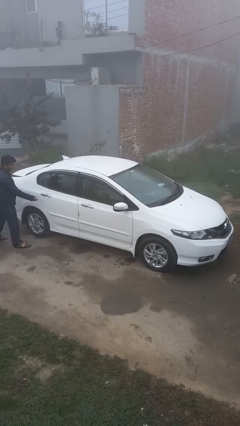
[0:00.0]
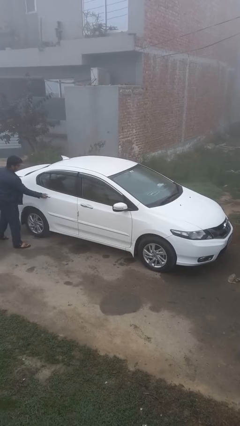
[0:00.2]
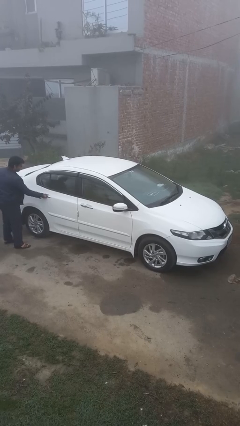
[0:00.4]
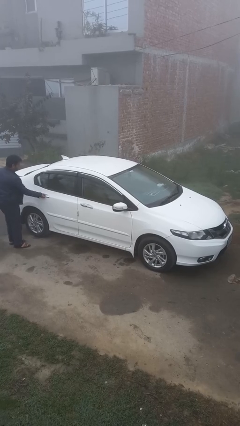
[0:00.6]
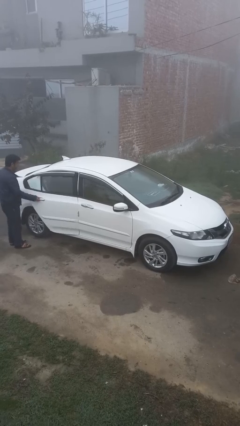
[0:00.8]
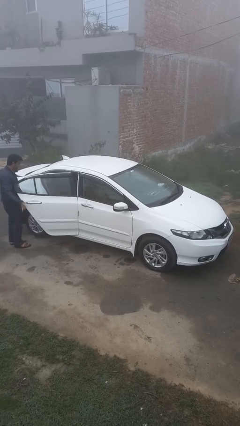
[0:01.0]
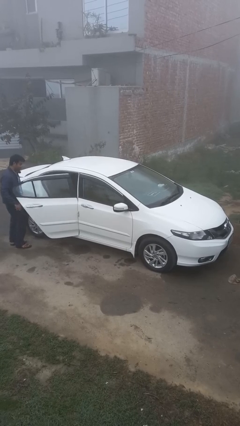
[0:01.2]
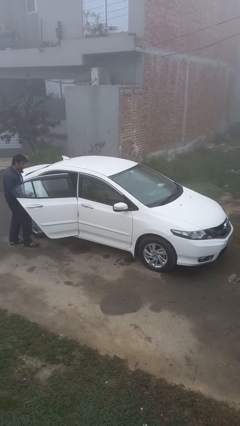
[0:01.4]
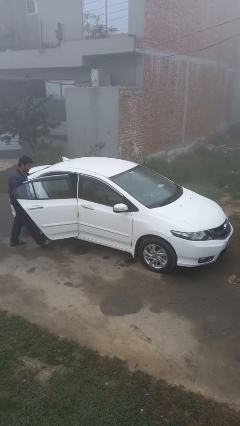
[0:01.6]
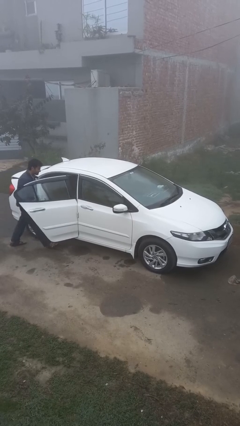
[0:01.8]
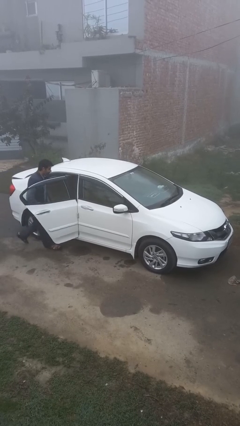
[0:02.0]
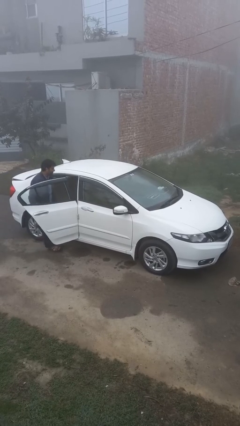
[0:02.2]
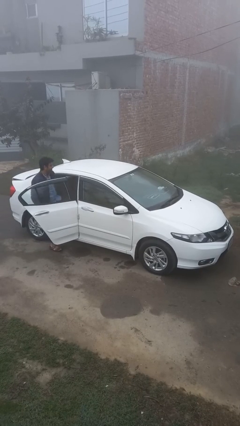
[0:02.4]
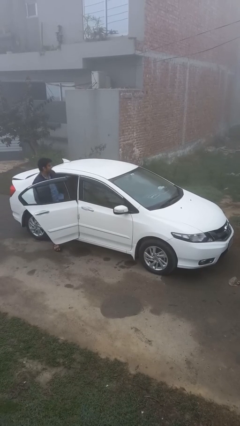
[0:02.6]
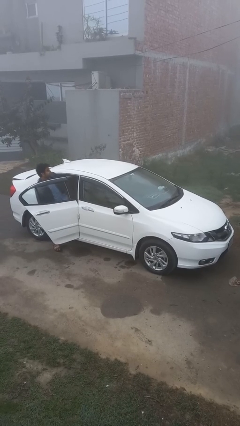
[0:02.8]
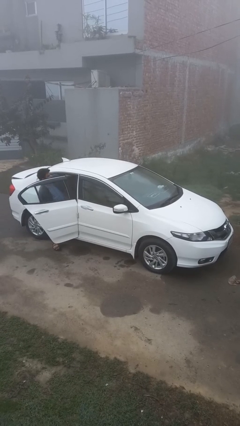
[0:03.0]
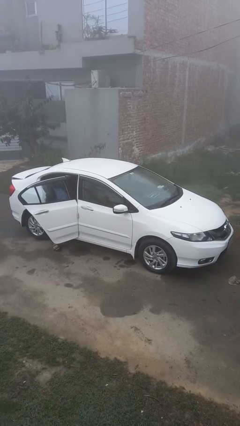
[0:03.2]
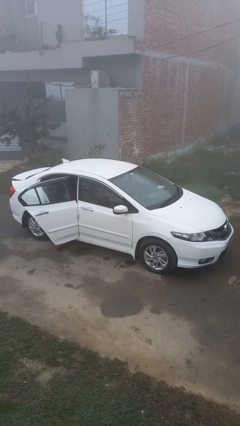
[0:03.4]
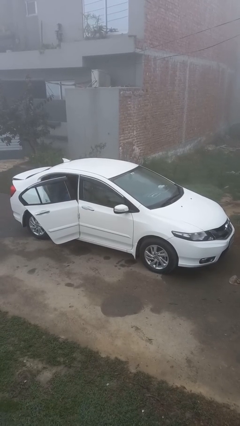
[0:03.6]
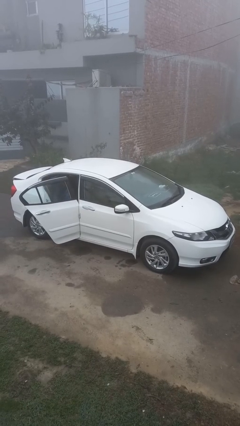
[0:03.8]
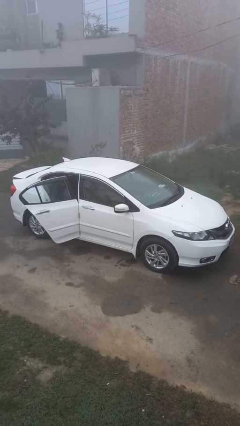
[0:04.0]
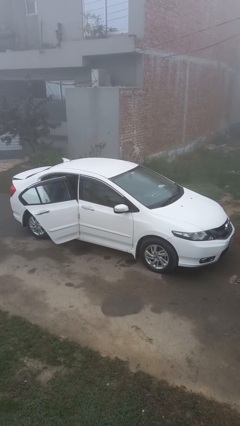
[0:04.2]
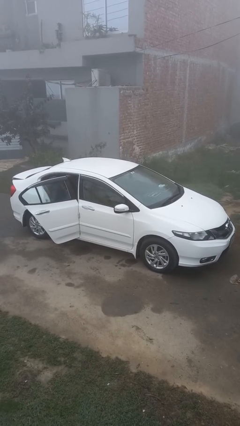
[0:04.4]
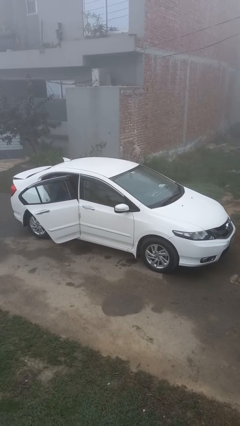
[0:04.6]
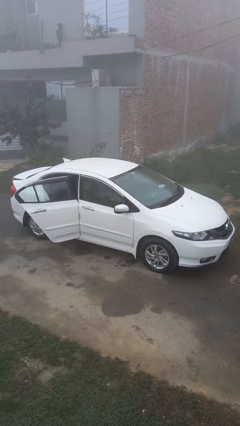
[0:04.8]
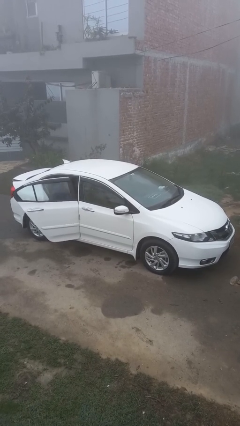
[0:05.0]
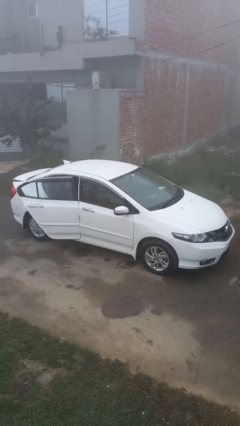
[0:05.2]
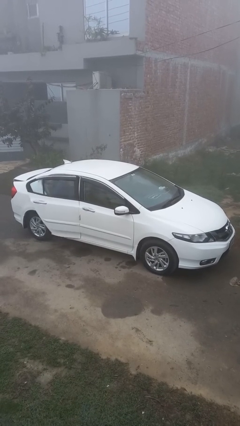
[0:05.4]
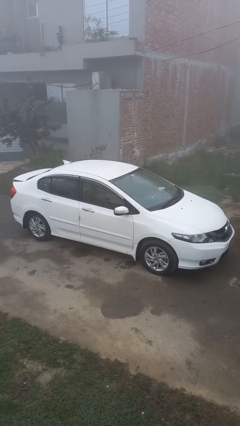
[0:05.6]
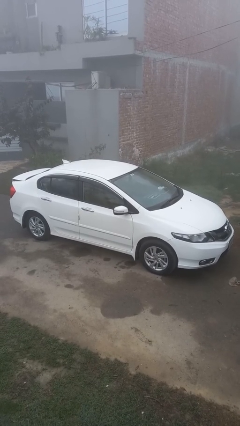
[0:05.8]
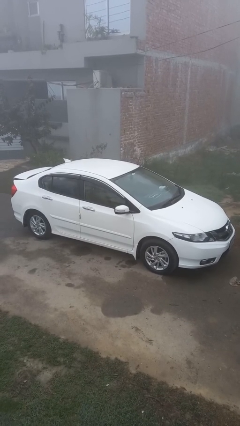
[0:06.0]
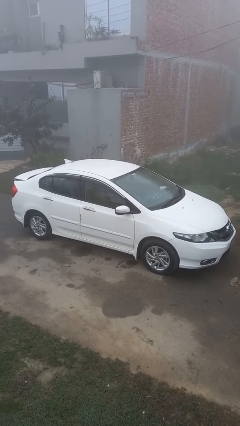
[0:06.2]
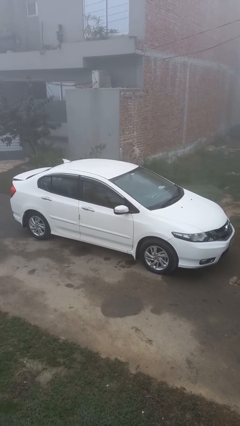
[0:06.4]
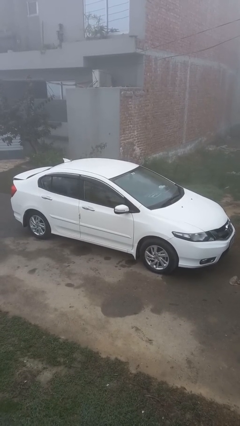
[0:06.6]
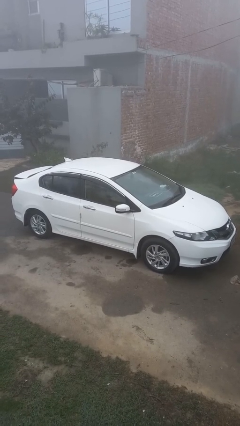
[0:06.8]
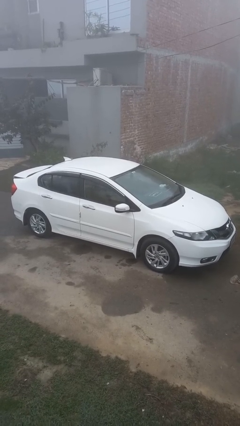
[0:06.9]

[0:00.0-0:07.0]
car picks up person

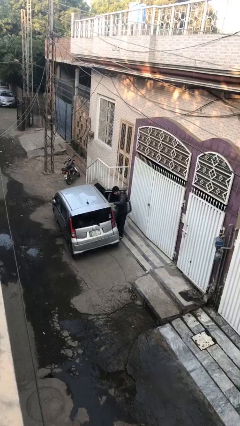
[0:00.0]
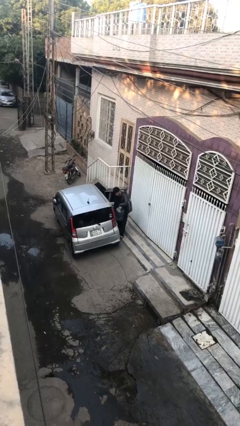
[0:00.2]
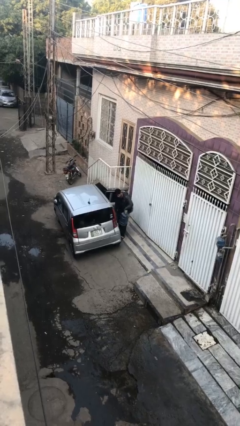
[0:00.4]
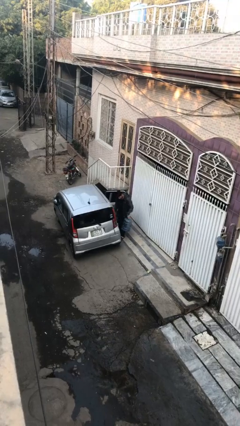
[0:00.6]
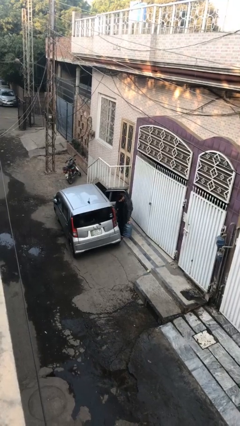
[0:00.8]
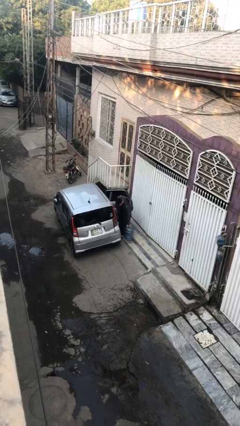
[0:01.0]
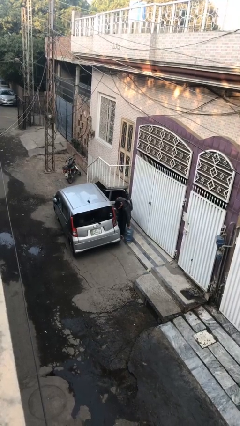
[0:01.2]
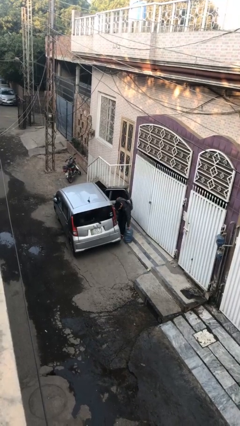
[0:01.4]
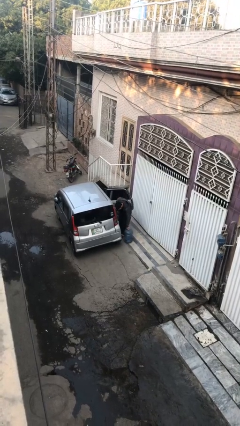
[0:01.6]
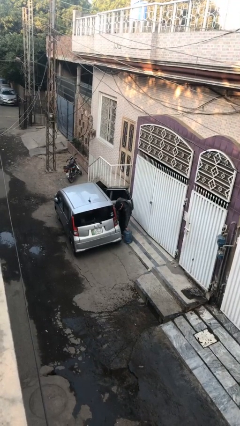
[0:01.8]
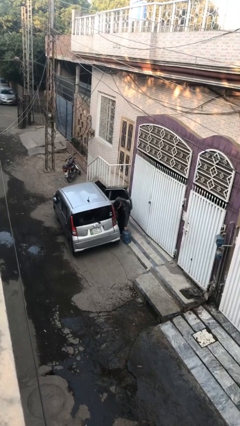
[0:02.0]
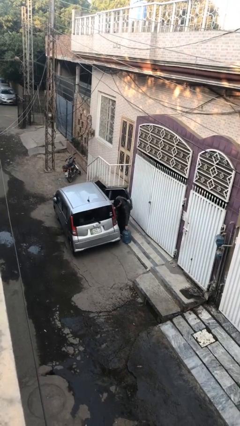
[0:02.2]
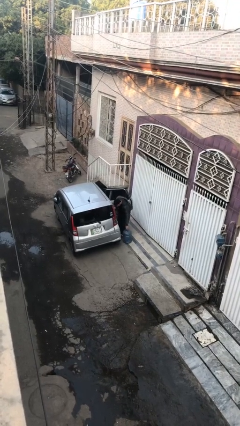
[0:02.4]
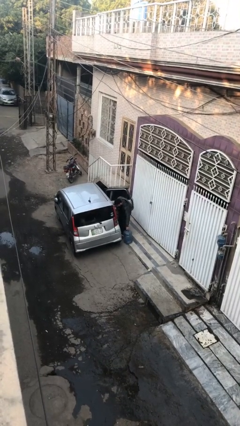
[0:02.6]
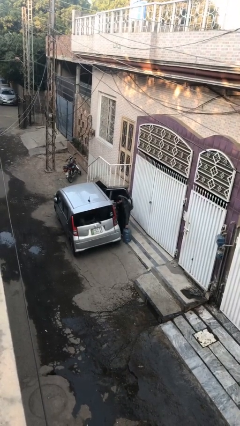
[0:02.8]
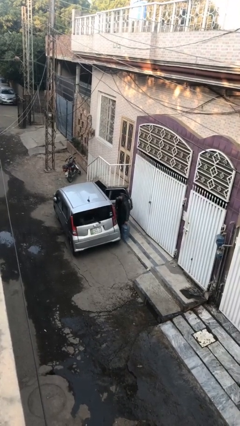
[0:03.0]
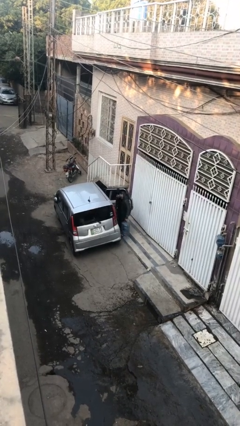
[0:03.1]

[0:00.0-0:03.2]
person unloads car

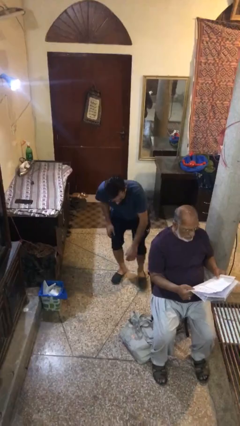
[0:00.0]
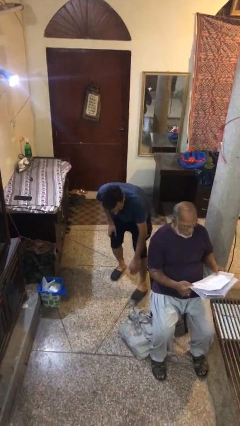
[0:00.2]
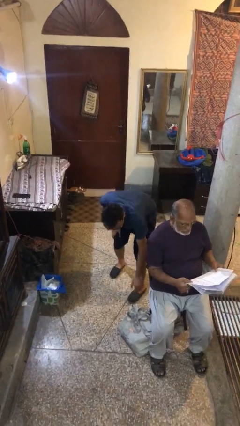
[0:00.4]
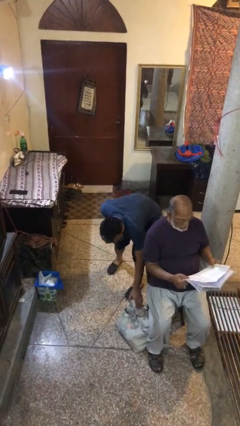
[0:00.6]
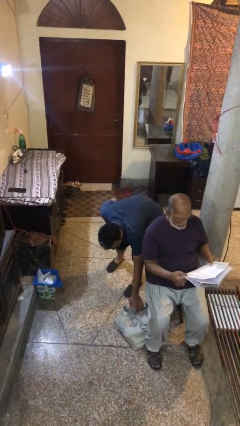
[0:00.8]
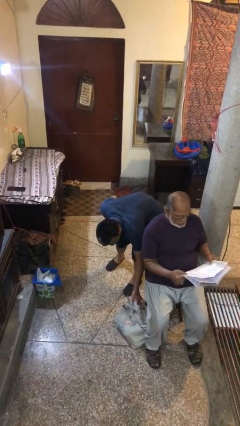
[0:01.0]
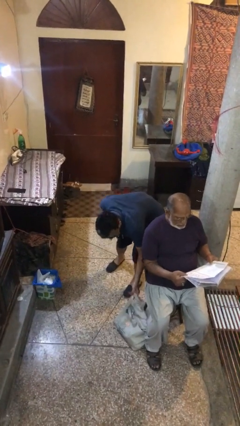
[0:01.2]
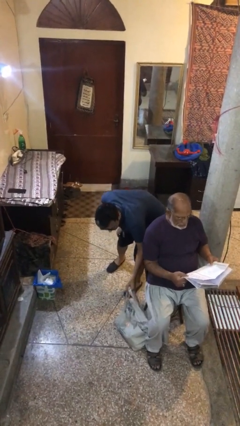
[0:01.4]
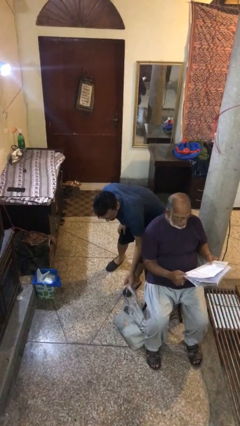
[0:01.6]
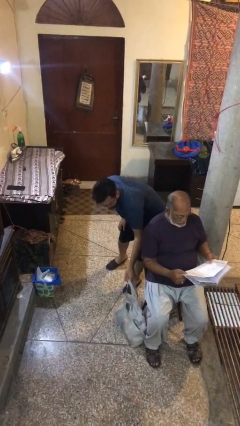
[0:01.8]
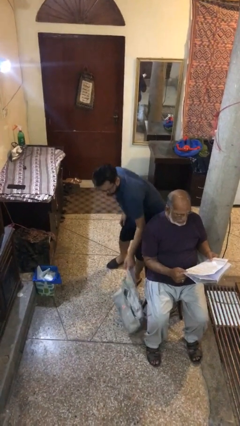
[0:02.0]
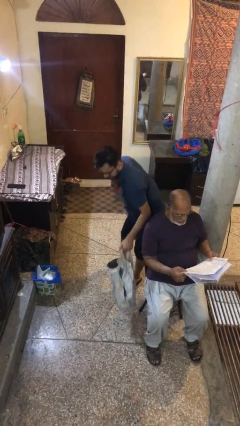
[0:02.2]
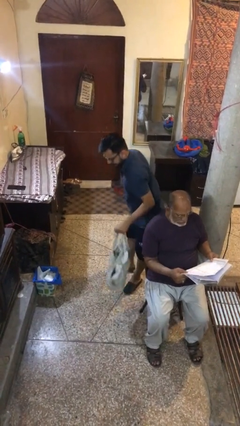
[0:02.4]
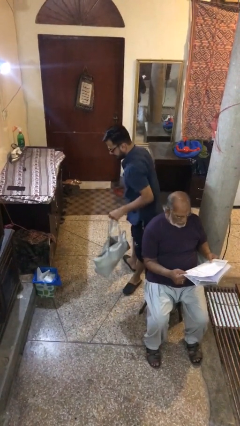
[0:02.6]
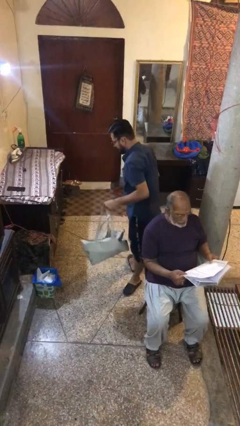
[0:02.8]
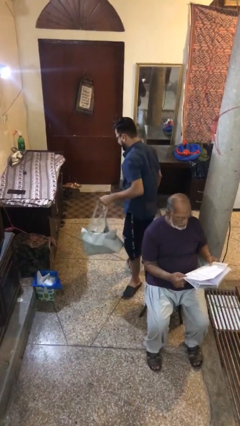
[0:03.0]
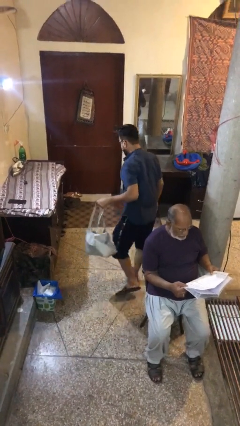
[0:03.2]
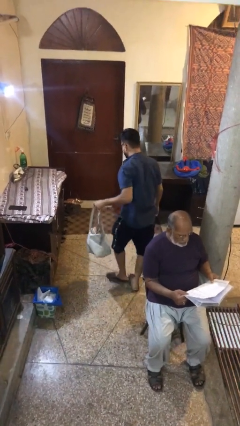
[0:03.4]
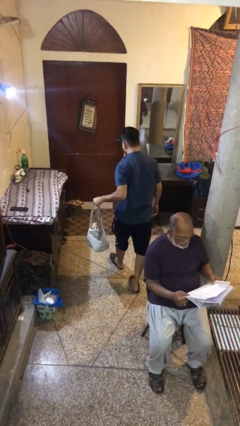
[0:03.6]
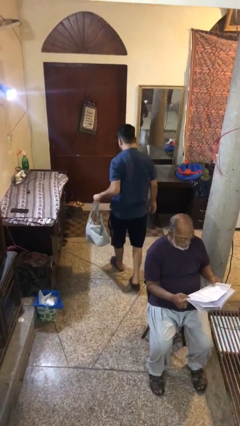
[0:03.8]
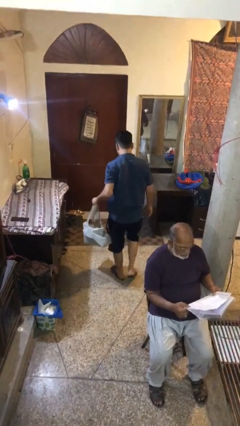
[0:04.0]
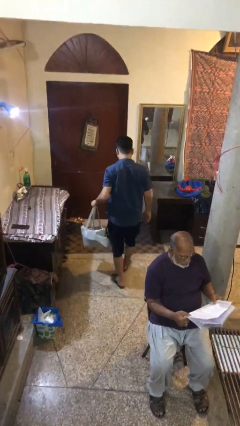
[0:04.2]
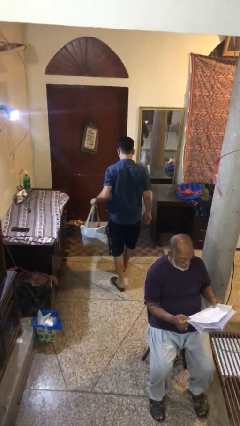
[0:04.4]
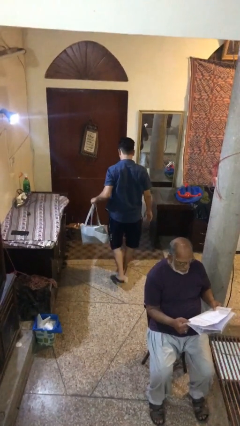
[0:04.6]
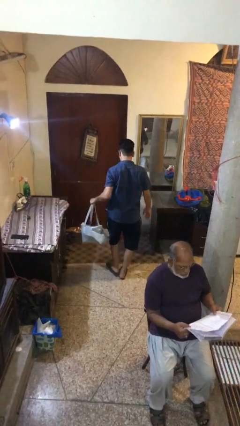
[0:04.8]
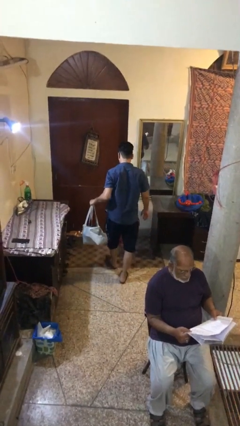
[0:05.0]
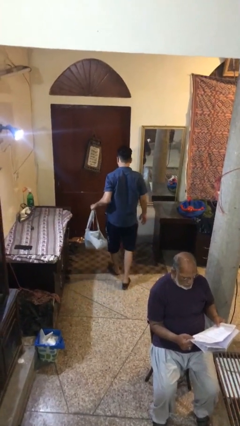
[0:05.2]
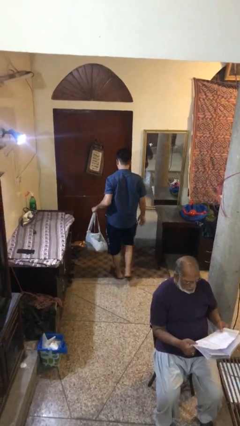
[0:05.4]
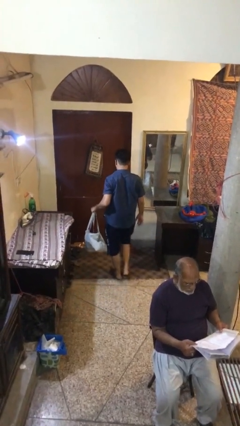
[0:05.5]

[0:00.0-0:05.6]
person steals object from person

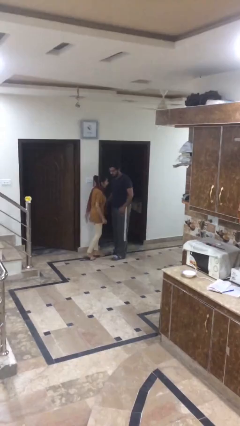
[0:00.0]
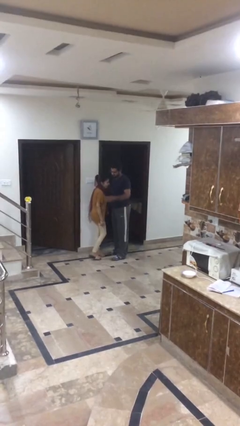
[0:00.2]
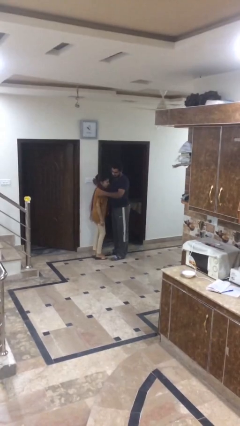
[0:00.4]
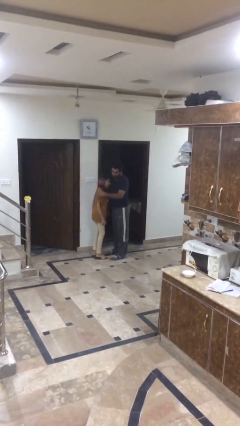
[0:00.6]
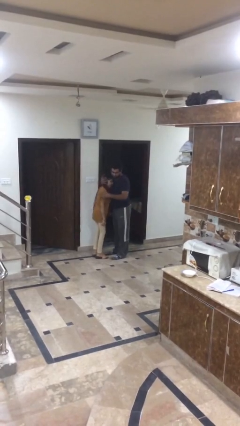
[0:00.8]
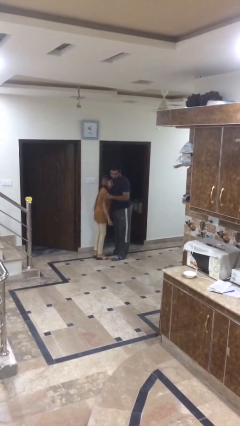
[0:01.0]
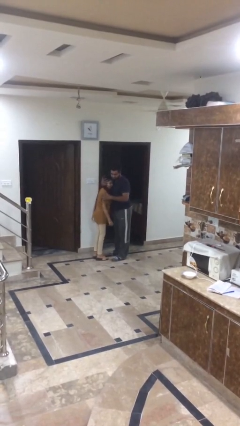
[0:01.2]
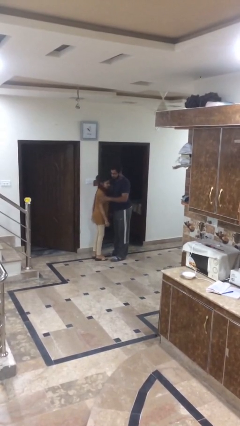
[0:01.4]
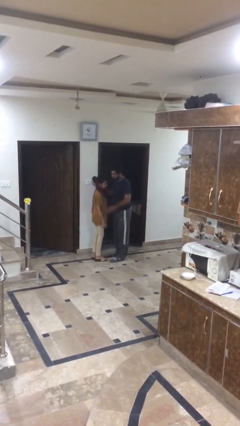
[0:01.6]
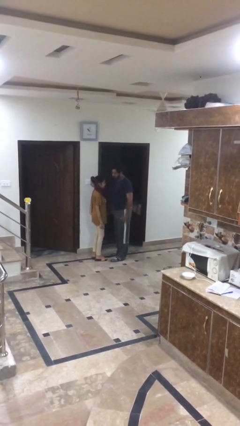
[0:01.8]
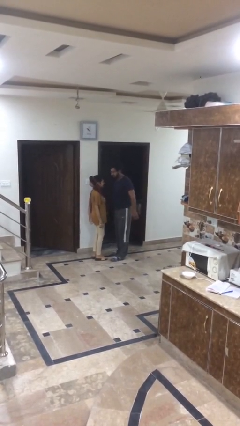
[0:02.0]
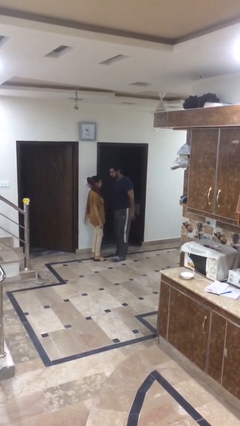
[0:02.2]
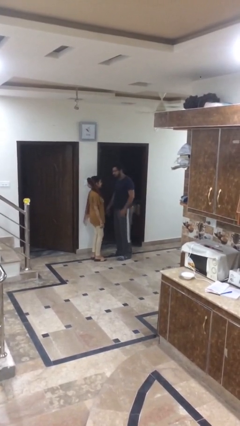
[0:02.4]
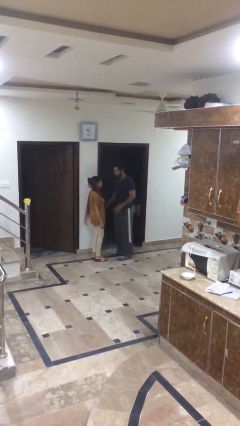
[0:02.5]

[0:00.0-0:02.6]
person embraces person
